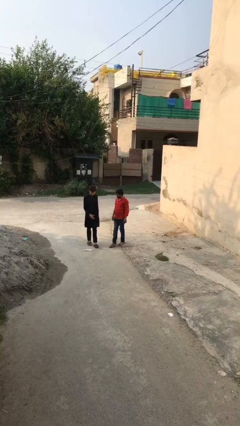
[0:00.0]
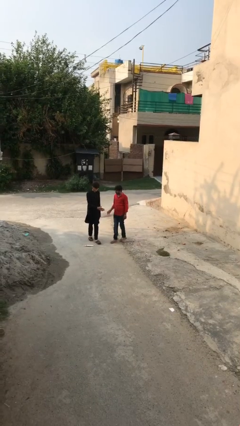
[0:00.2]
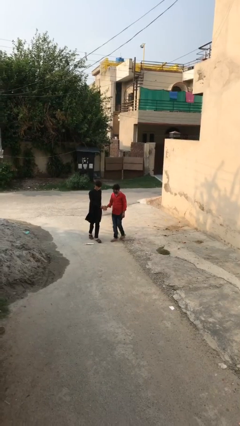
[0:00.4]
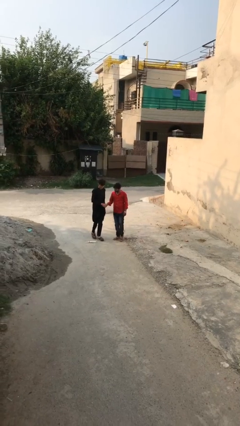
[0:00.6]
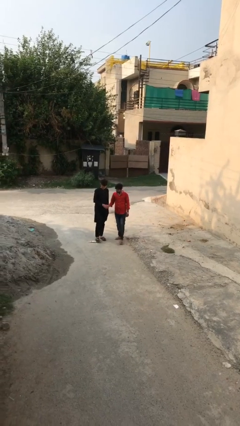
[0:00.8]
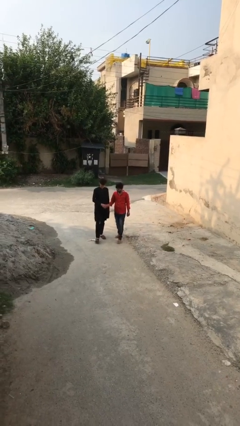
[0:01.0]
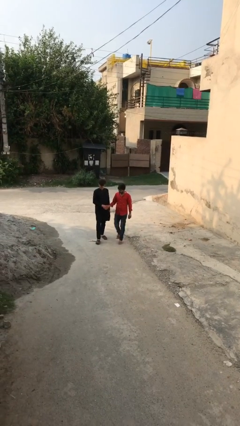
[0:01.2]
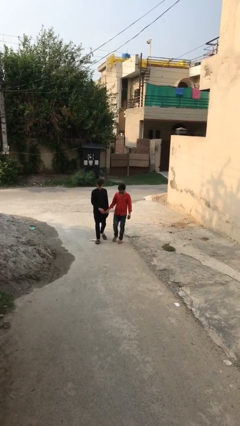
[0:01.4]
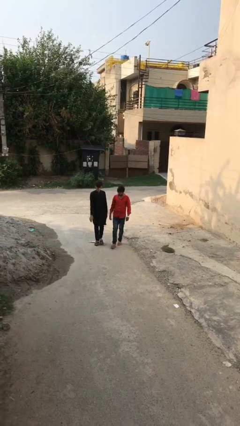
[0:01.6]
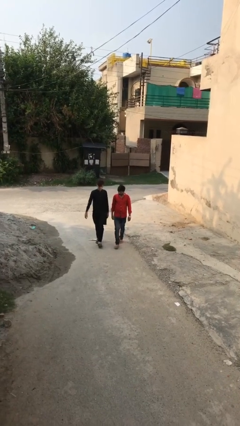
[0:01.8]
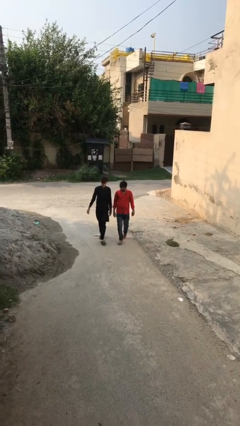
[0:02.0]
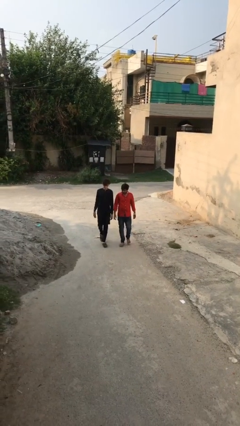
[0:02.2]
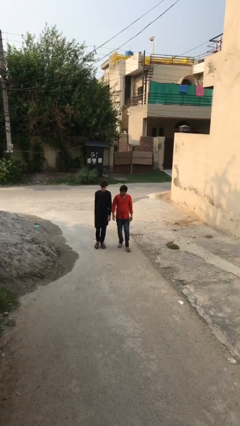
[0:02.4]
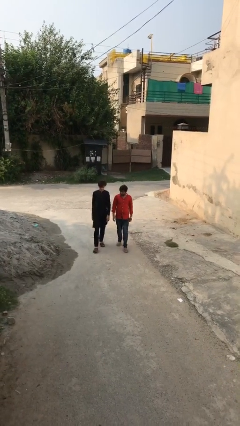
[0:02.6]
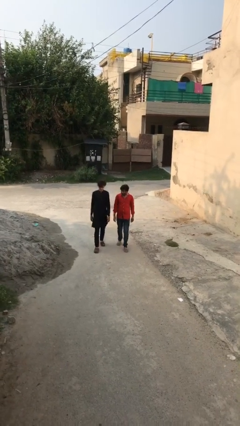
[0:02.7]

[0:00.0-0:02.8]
person shakes hand

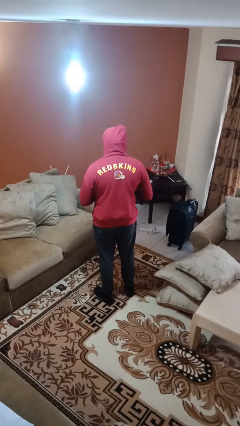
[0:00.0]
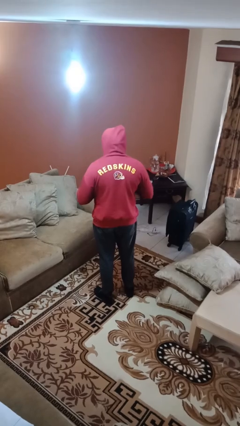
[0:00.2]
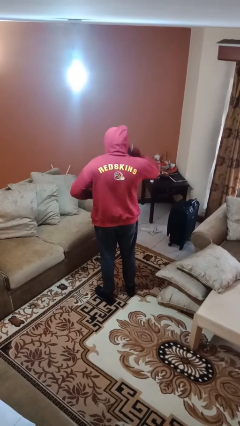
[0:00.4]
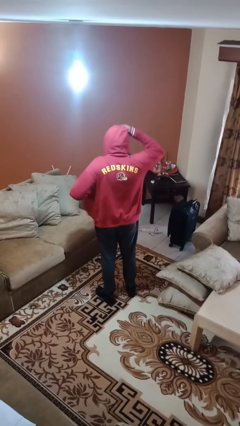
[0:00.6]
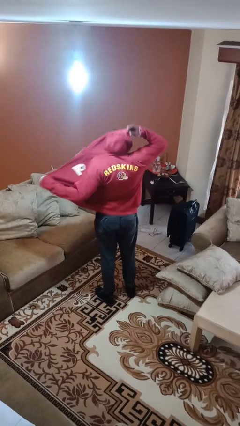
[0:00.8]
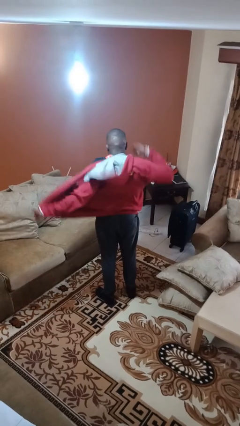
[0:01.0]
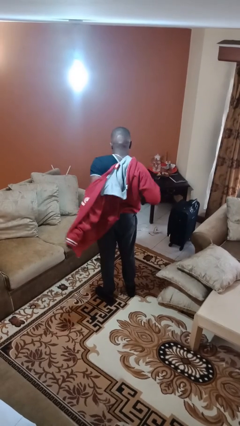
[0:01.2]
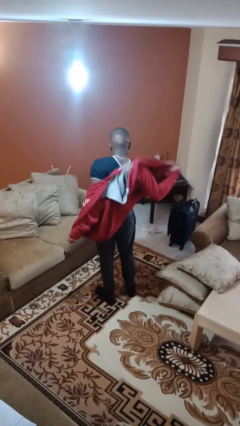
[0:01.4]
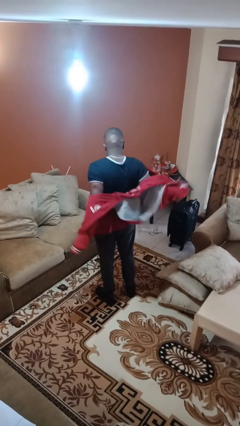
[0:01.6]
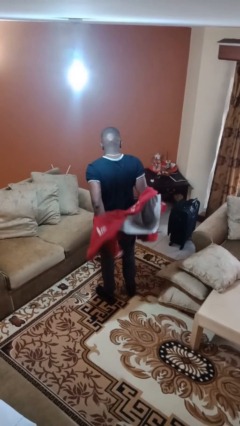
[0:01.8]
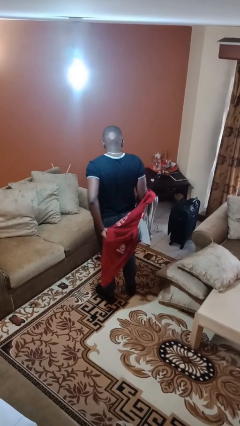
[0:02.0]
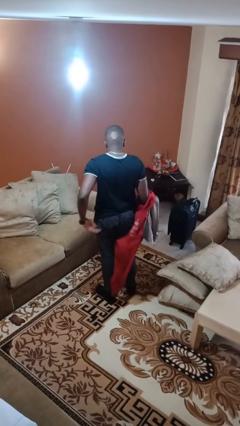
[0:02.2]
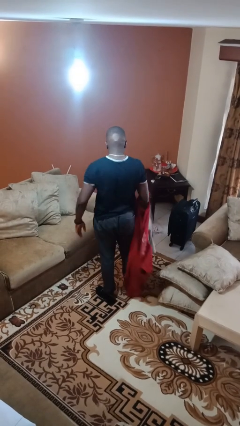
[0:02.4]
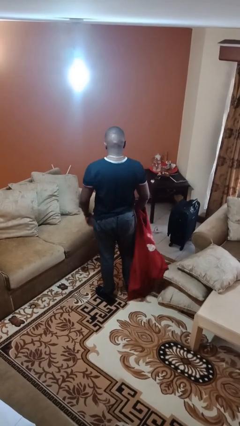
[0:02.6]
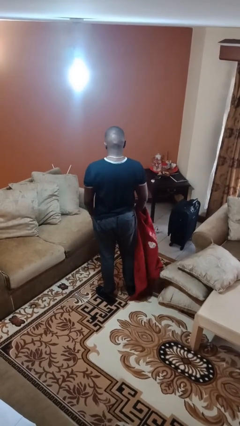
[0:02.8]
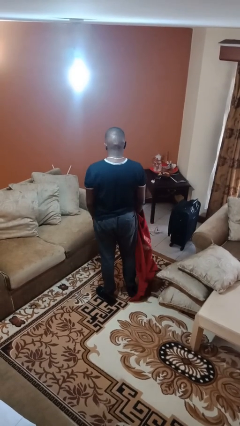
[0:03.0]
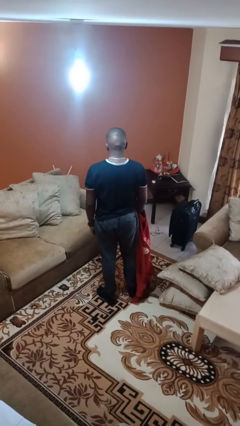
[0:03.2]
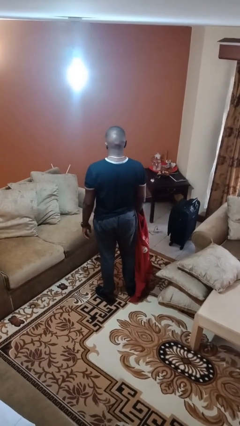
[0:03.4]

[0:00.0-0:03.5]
person takes off hoodie

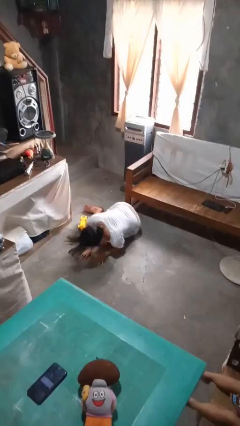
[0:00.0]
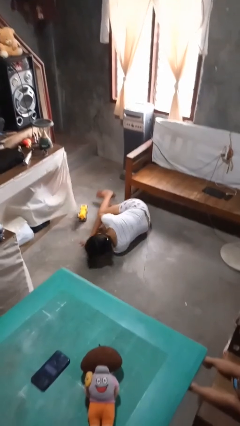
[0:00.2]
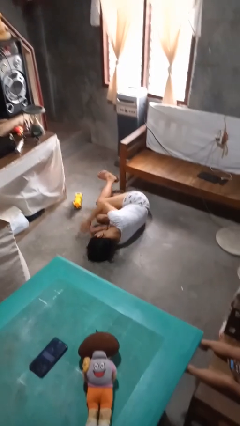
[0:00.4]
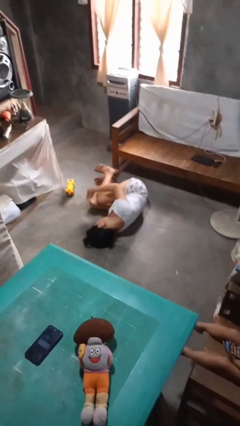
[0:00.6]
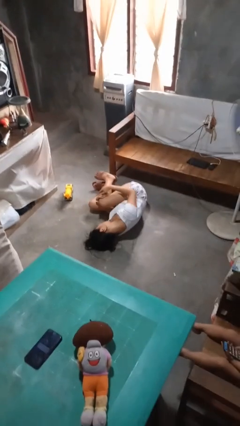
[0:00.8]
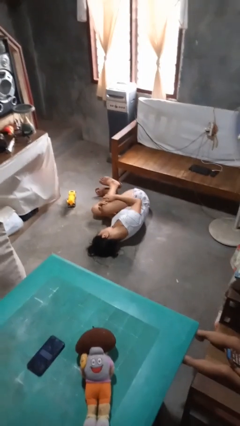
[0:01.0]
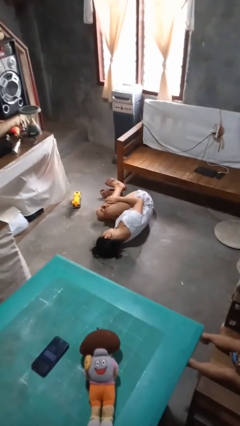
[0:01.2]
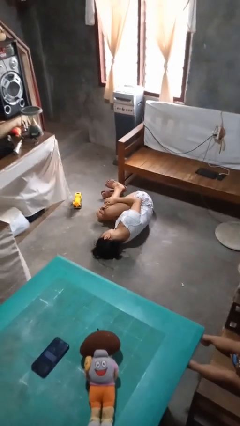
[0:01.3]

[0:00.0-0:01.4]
person lies down on floor

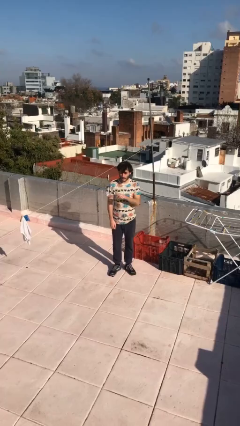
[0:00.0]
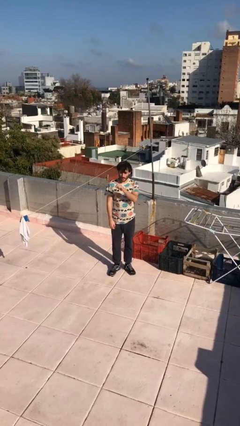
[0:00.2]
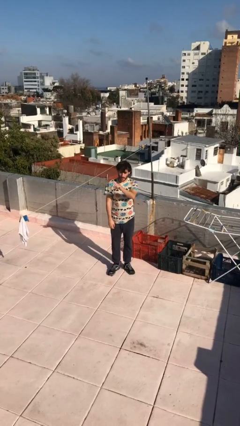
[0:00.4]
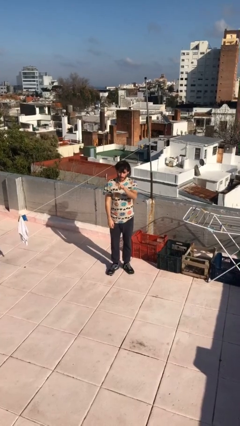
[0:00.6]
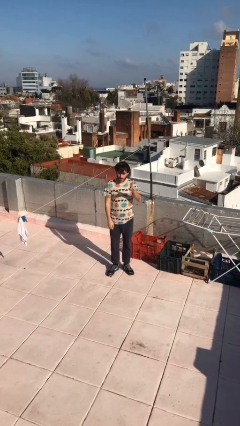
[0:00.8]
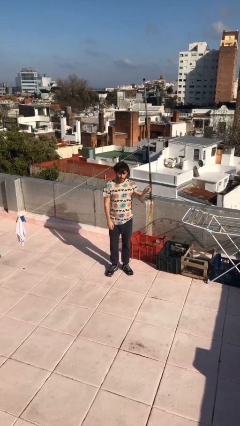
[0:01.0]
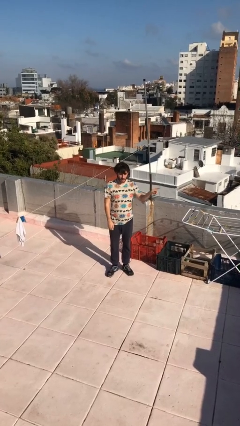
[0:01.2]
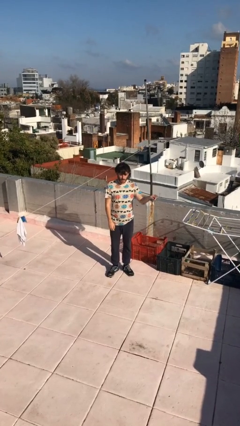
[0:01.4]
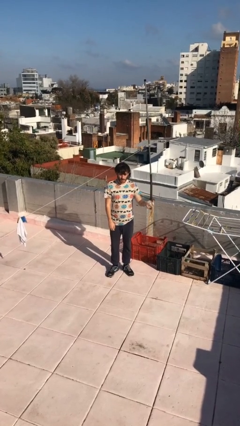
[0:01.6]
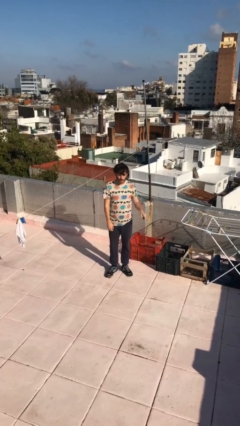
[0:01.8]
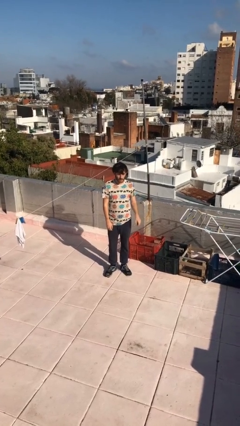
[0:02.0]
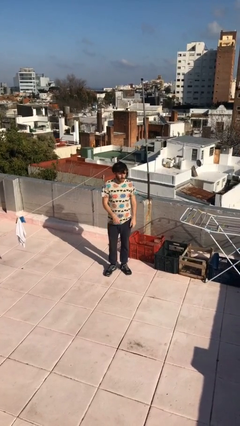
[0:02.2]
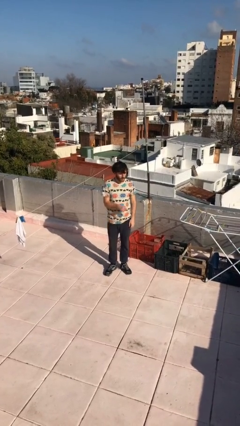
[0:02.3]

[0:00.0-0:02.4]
person gestures swipe left

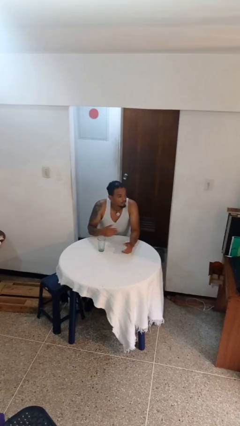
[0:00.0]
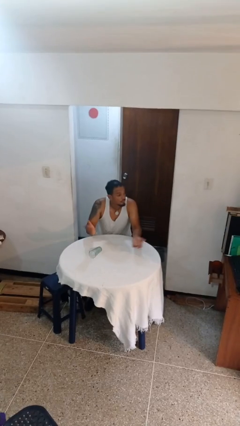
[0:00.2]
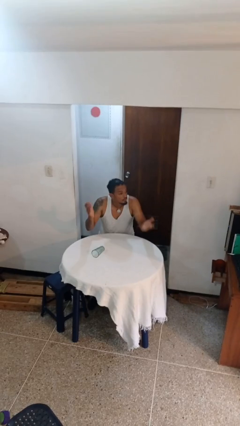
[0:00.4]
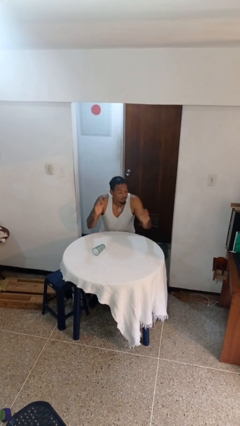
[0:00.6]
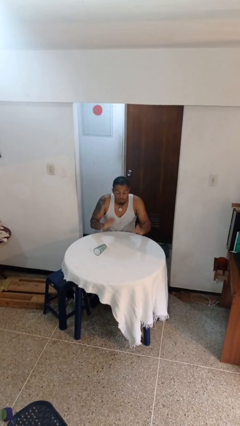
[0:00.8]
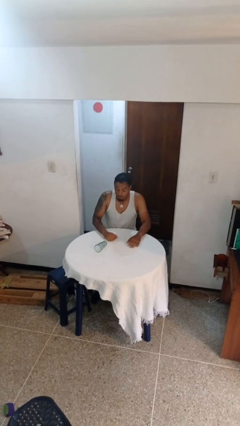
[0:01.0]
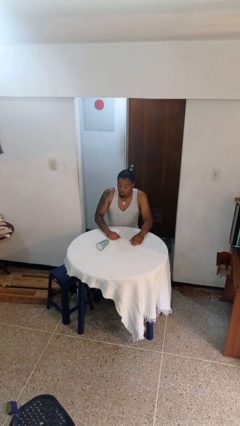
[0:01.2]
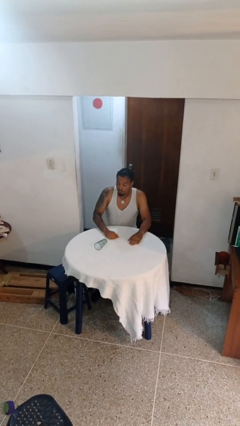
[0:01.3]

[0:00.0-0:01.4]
person knocks over glass

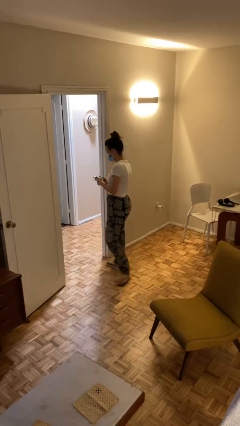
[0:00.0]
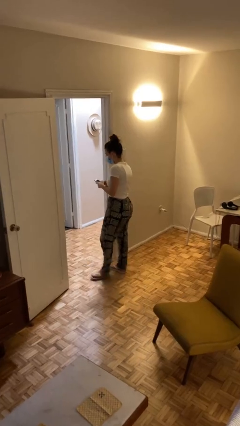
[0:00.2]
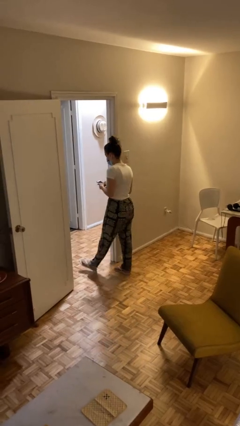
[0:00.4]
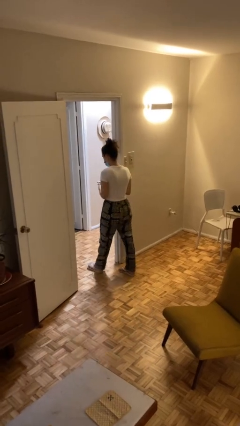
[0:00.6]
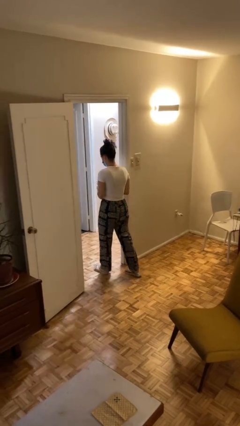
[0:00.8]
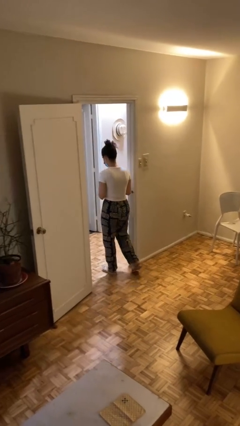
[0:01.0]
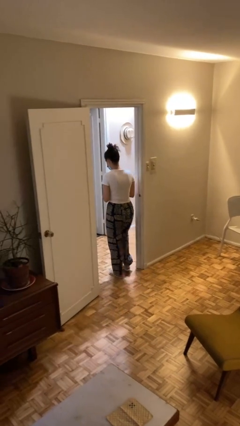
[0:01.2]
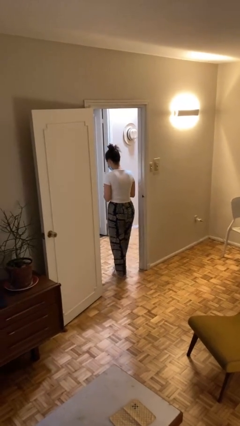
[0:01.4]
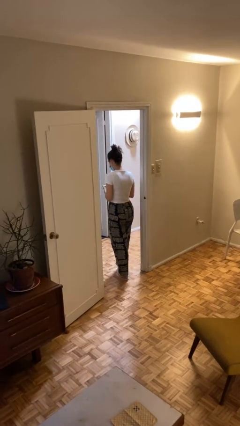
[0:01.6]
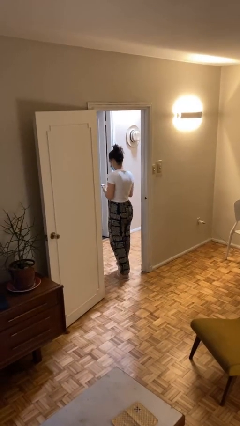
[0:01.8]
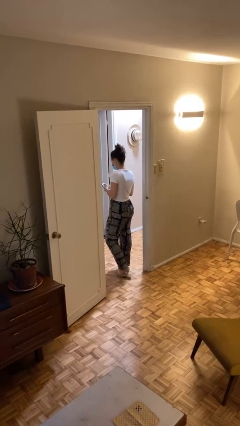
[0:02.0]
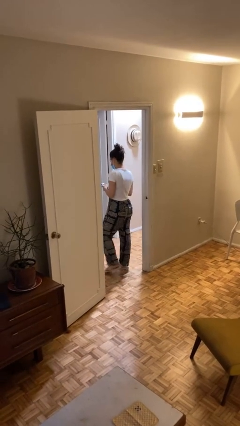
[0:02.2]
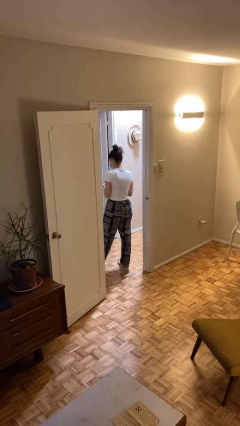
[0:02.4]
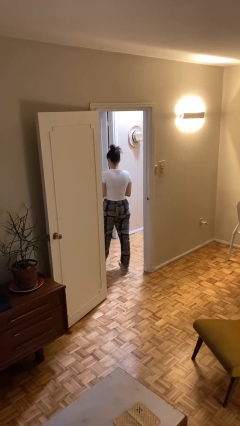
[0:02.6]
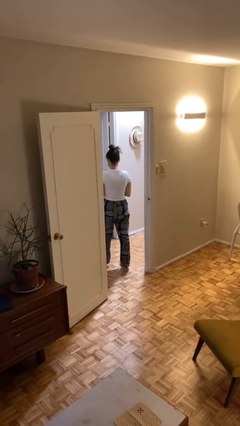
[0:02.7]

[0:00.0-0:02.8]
person exits scene through structure

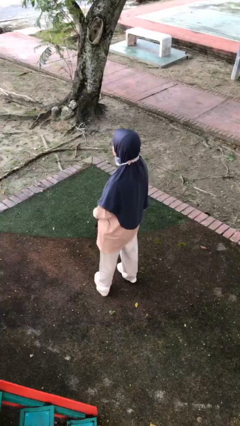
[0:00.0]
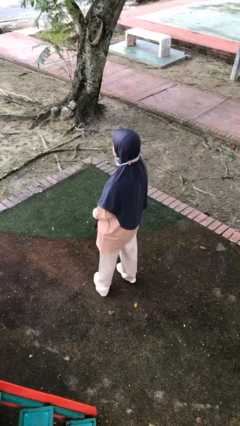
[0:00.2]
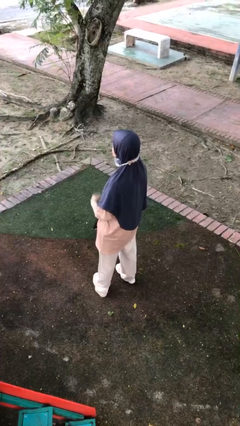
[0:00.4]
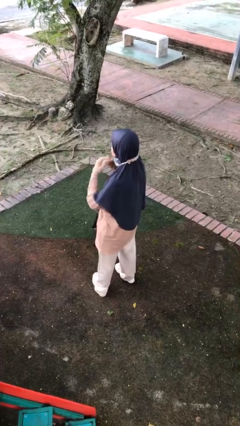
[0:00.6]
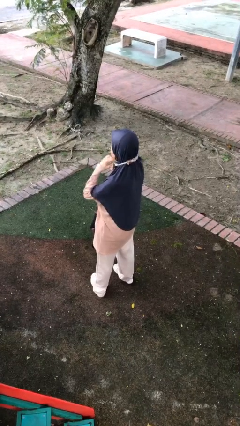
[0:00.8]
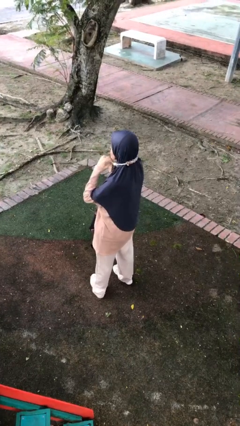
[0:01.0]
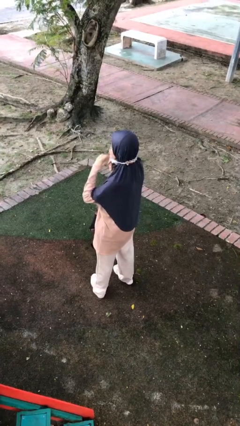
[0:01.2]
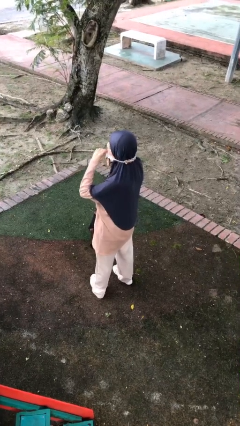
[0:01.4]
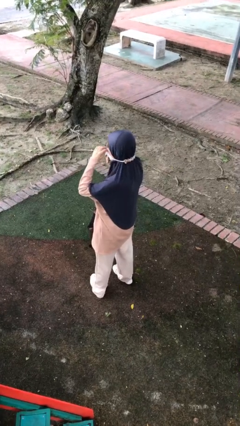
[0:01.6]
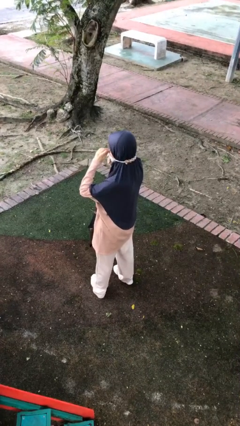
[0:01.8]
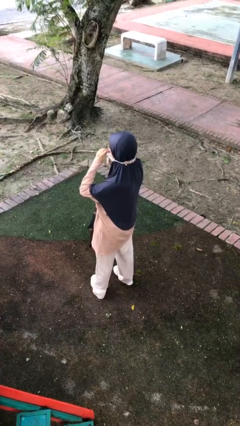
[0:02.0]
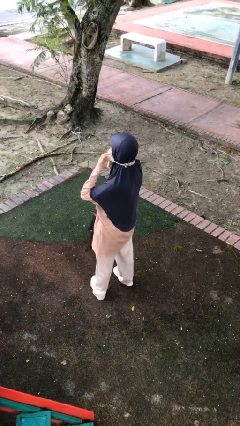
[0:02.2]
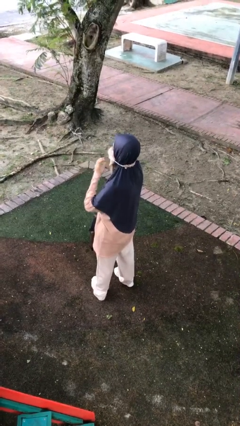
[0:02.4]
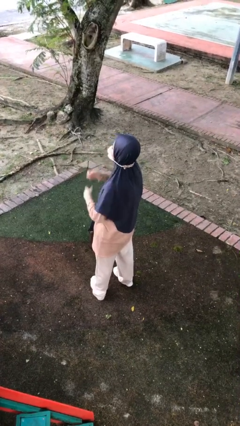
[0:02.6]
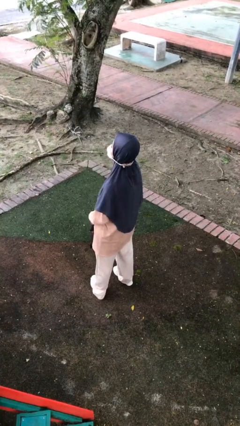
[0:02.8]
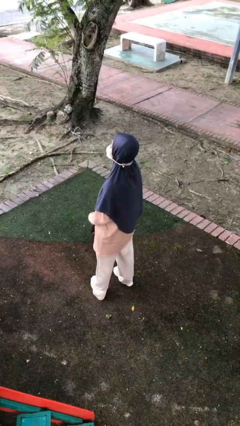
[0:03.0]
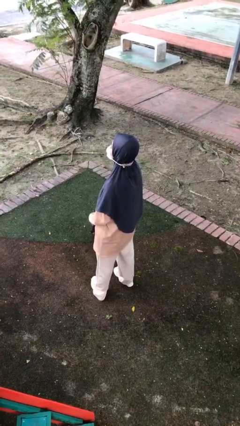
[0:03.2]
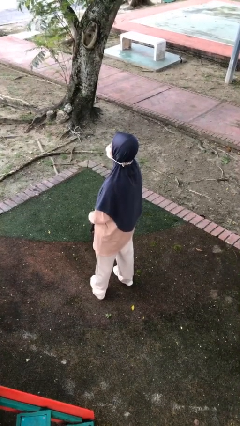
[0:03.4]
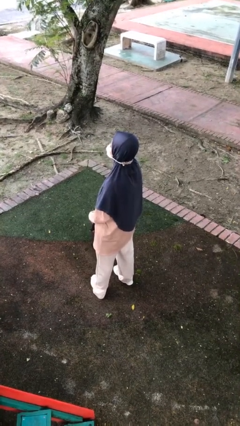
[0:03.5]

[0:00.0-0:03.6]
person puts on facemask
